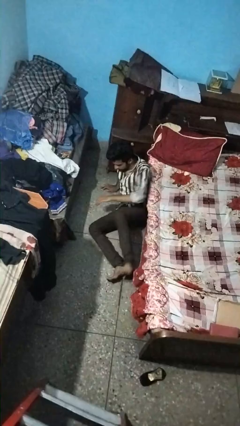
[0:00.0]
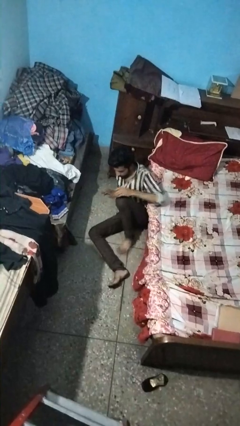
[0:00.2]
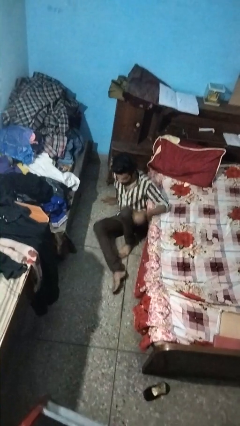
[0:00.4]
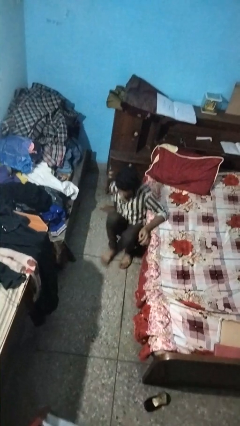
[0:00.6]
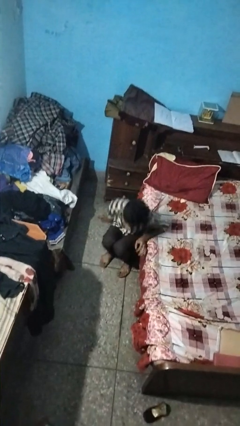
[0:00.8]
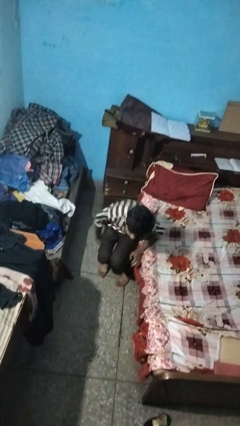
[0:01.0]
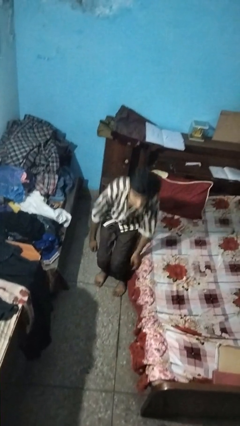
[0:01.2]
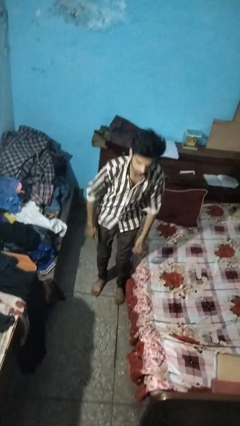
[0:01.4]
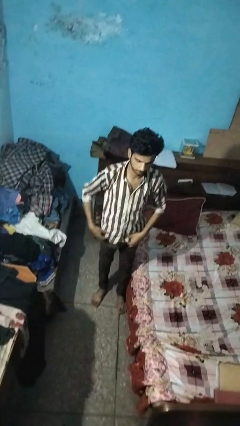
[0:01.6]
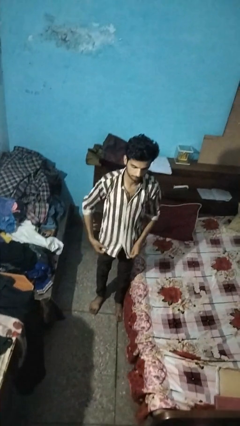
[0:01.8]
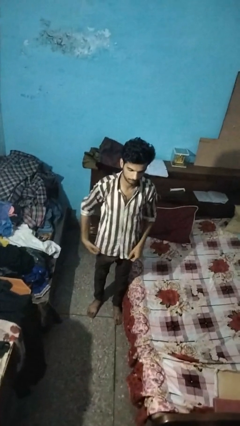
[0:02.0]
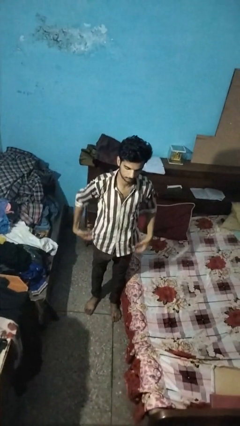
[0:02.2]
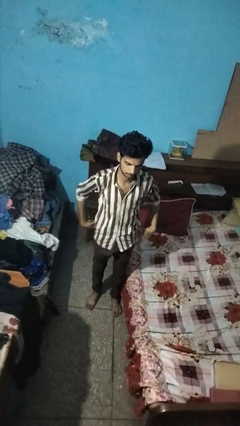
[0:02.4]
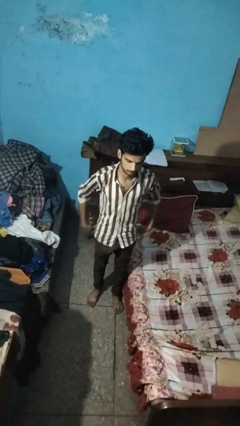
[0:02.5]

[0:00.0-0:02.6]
person stands up from floor

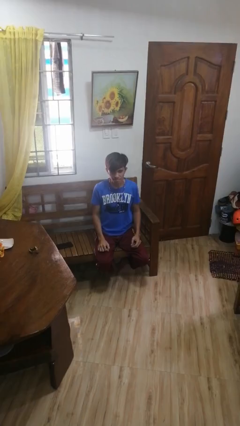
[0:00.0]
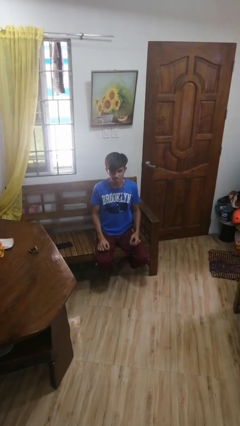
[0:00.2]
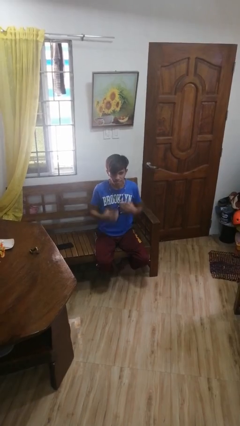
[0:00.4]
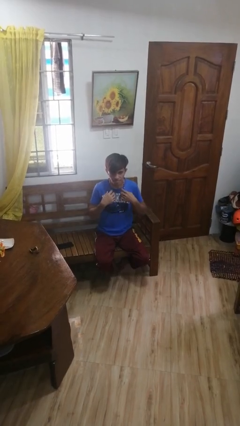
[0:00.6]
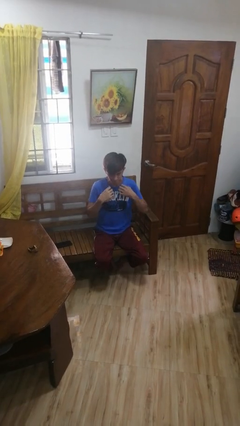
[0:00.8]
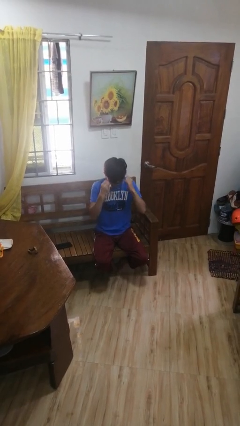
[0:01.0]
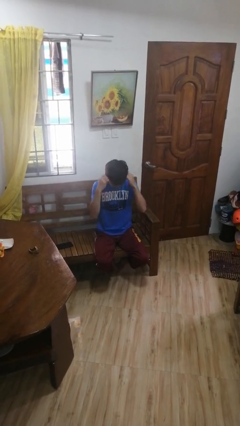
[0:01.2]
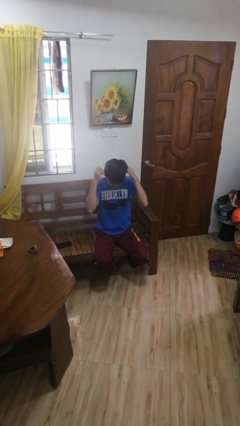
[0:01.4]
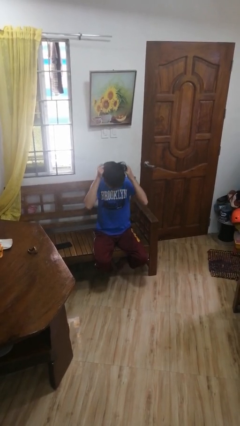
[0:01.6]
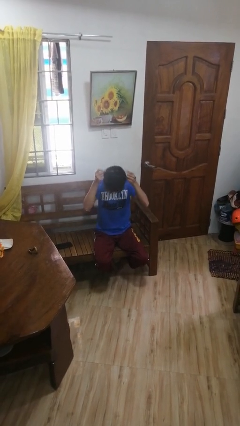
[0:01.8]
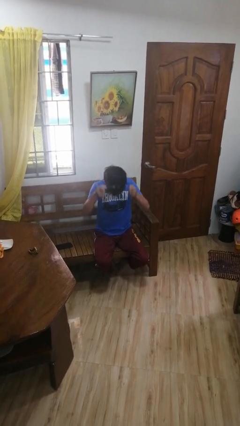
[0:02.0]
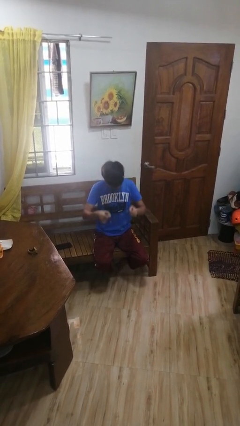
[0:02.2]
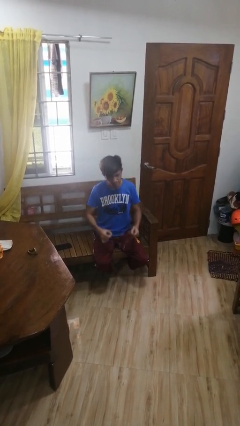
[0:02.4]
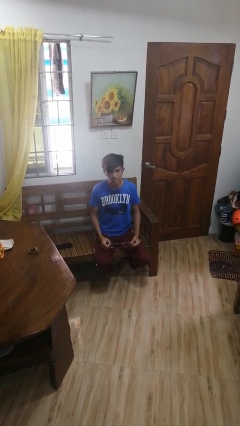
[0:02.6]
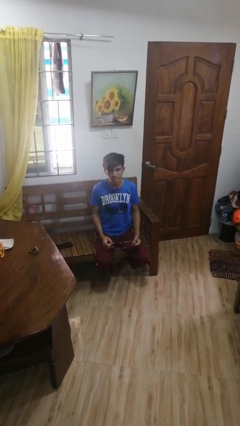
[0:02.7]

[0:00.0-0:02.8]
person takes off necklace

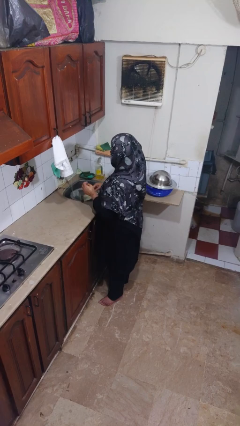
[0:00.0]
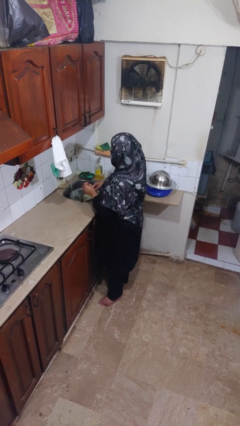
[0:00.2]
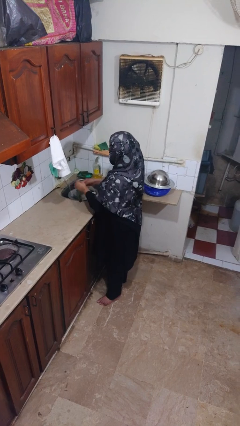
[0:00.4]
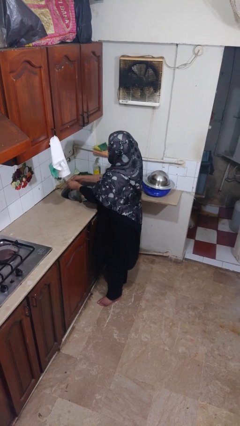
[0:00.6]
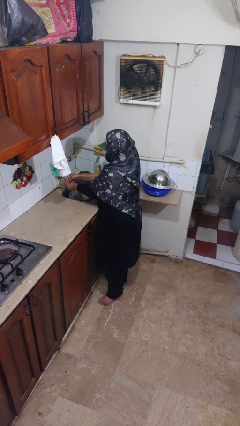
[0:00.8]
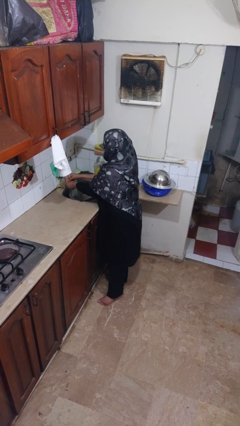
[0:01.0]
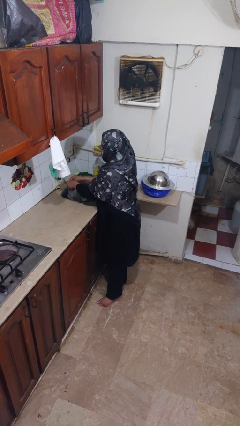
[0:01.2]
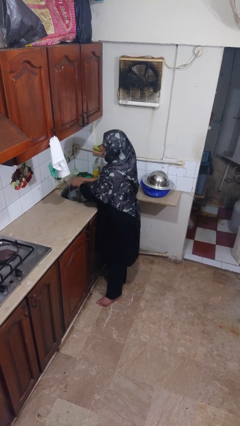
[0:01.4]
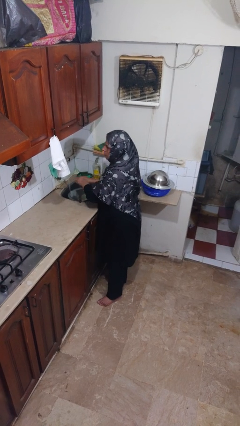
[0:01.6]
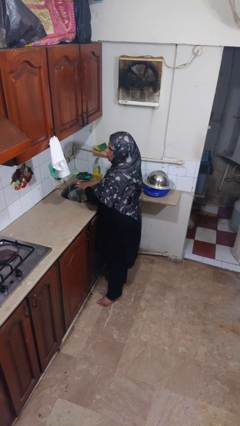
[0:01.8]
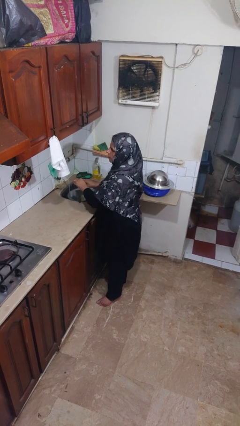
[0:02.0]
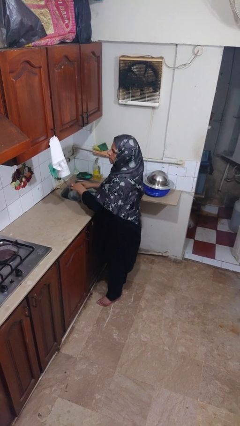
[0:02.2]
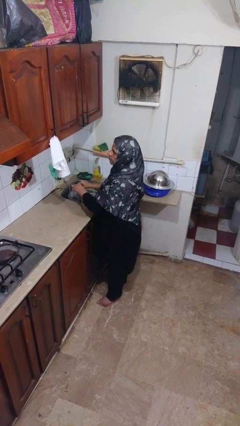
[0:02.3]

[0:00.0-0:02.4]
person washes hands

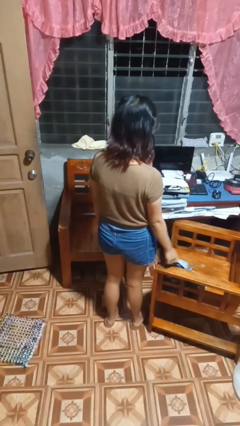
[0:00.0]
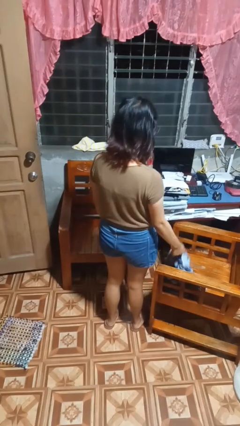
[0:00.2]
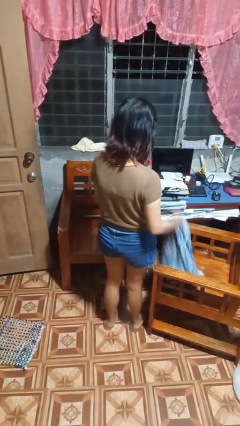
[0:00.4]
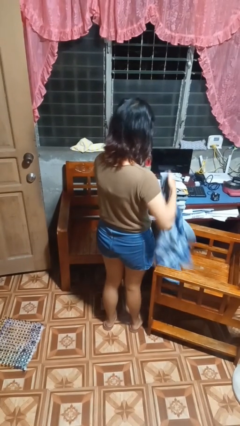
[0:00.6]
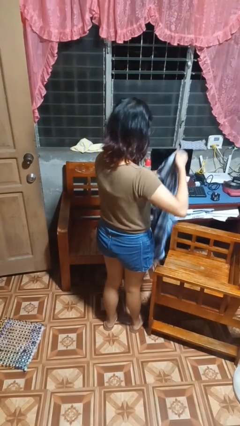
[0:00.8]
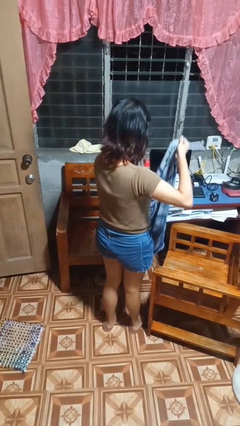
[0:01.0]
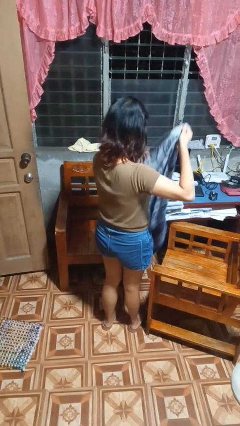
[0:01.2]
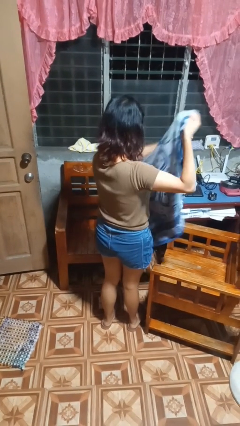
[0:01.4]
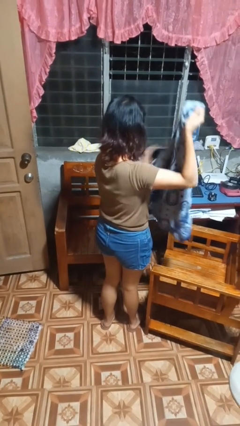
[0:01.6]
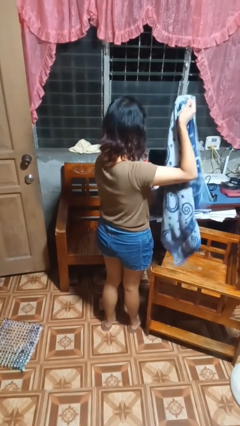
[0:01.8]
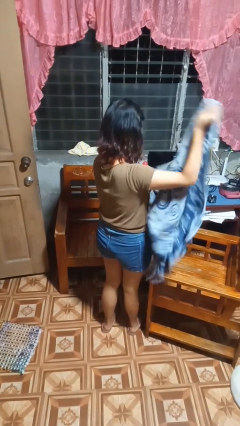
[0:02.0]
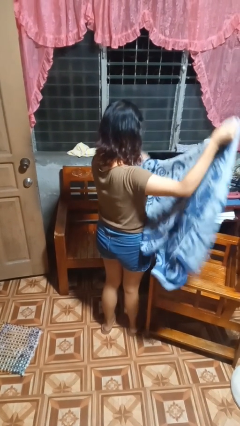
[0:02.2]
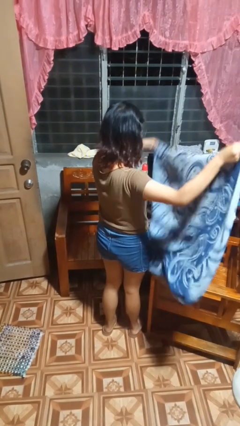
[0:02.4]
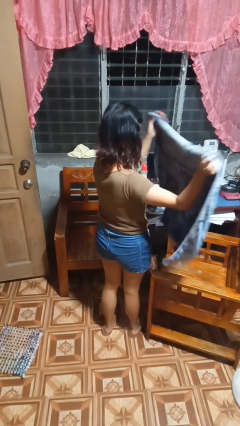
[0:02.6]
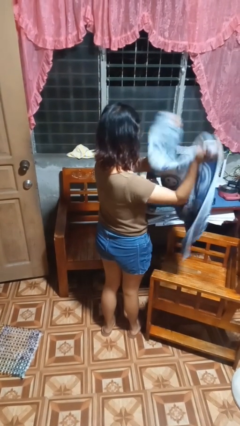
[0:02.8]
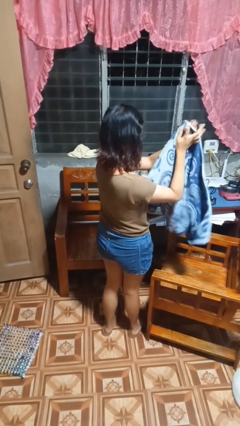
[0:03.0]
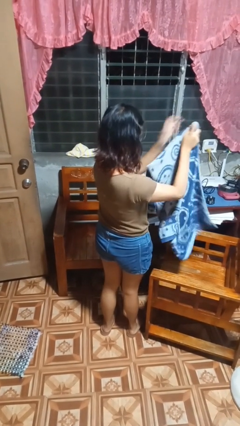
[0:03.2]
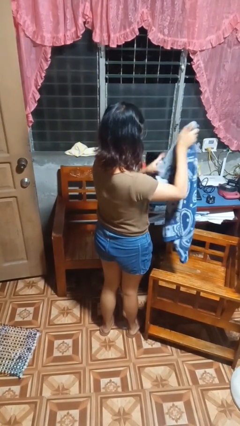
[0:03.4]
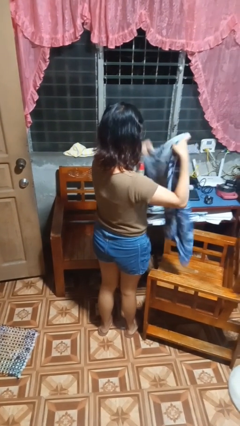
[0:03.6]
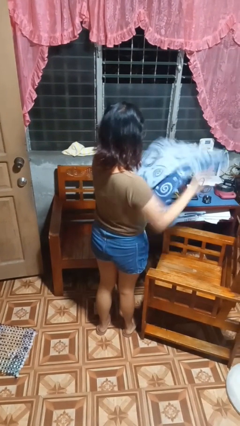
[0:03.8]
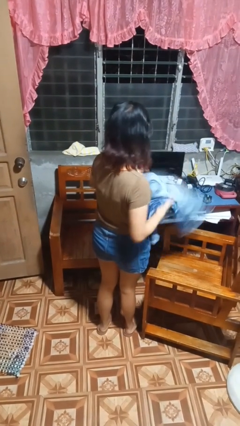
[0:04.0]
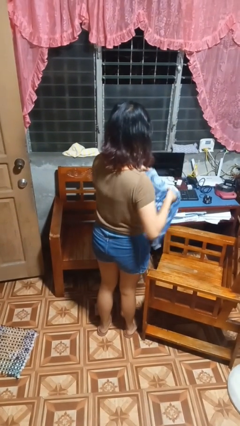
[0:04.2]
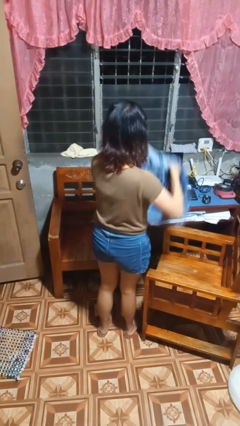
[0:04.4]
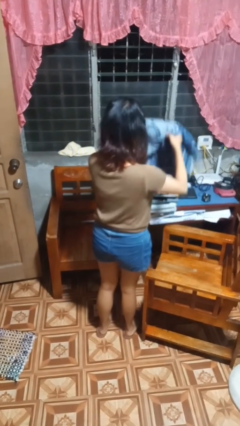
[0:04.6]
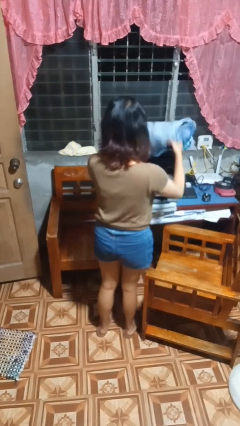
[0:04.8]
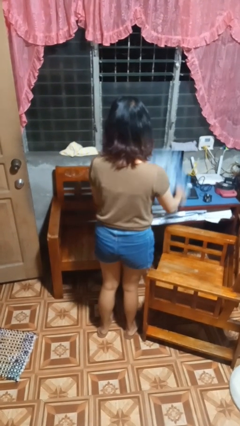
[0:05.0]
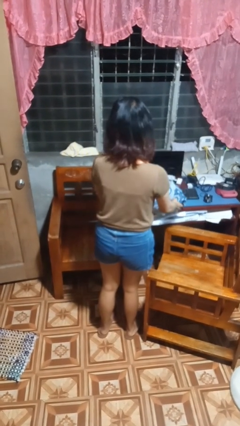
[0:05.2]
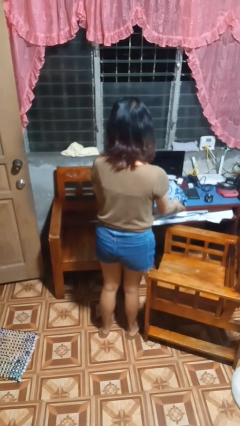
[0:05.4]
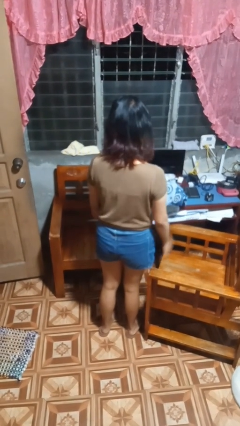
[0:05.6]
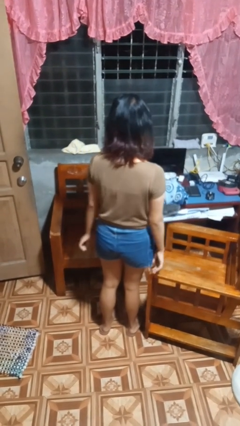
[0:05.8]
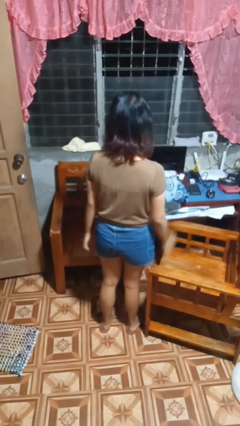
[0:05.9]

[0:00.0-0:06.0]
person folds towel

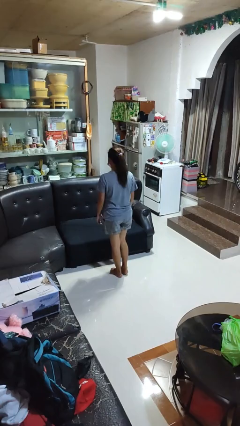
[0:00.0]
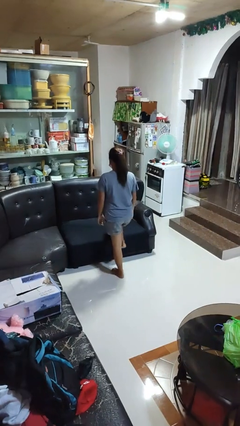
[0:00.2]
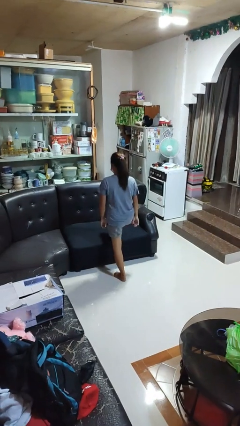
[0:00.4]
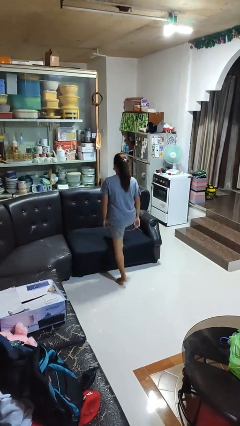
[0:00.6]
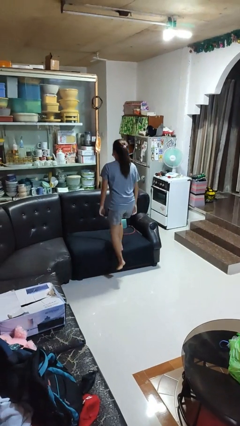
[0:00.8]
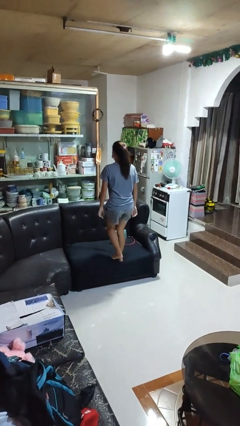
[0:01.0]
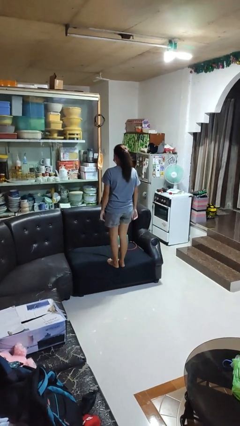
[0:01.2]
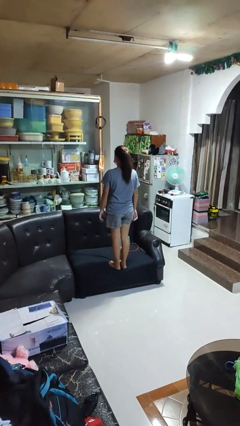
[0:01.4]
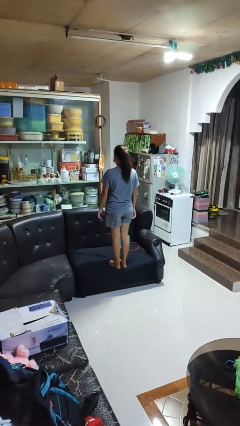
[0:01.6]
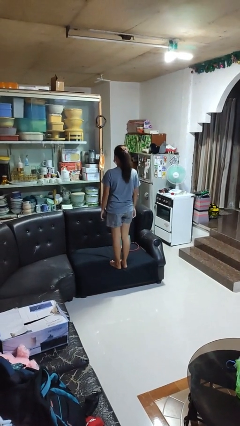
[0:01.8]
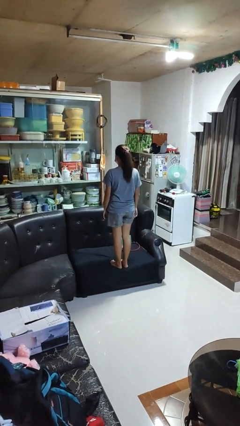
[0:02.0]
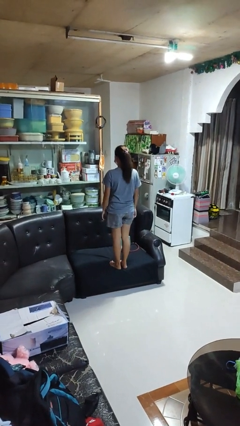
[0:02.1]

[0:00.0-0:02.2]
person climbs on couch

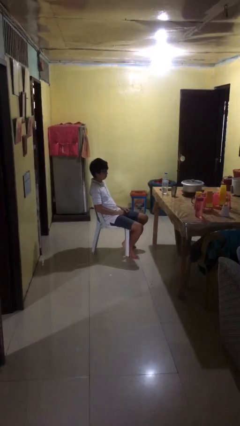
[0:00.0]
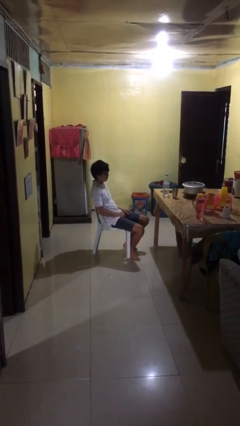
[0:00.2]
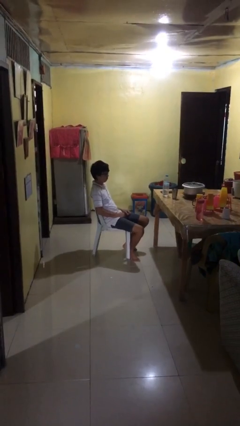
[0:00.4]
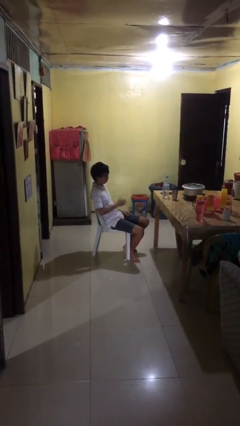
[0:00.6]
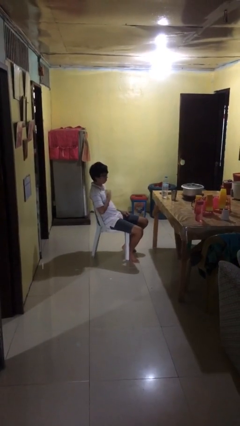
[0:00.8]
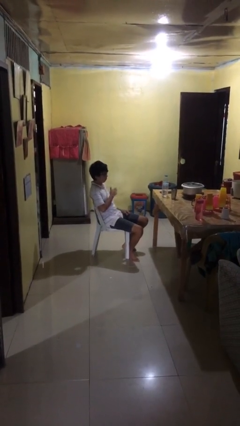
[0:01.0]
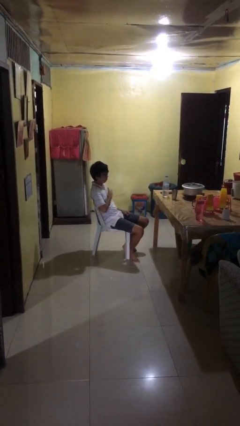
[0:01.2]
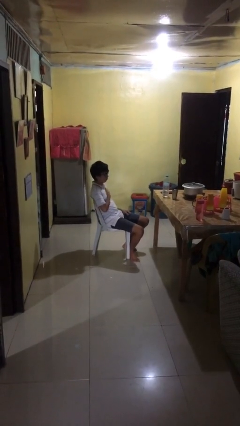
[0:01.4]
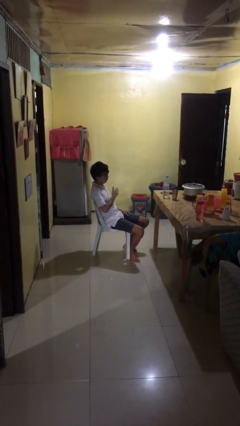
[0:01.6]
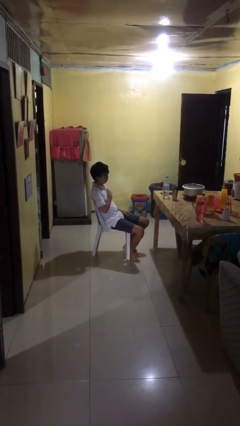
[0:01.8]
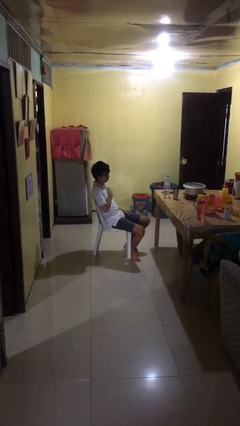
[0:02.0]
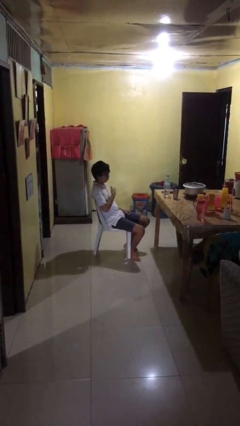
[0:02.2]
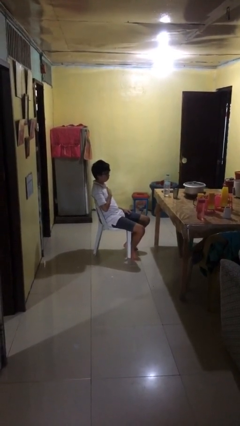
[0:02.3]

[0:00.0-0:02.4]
person drums on chest
